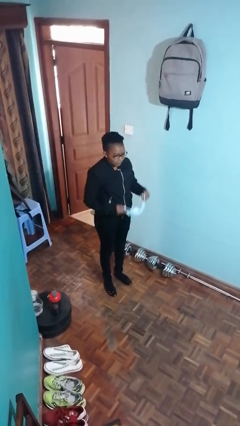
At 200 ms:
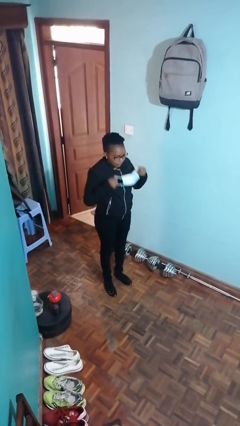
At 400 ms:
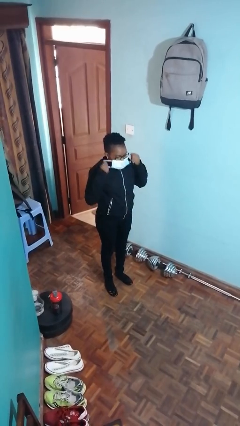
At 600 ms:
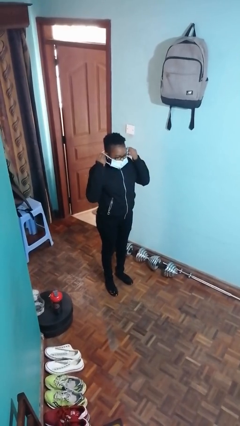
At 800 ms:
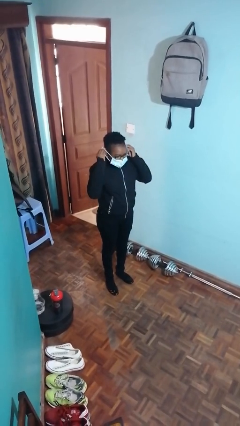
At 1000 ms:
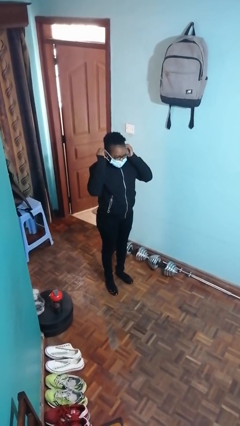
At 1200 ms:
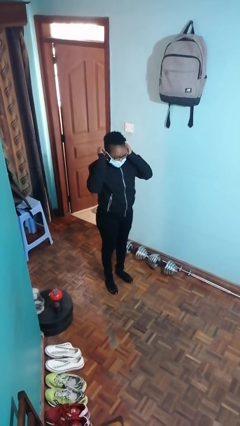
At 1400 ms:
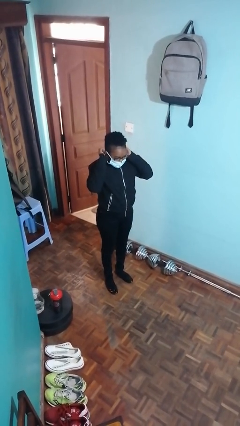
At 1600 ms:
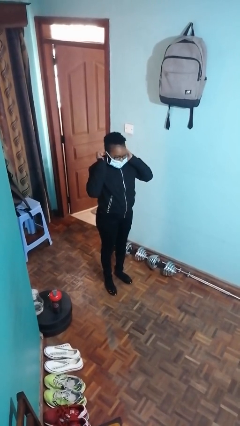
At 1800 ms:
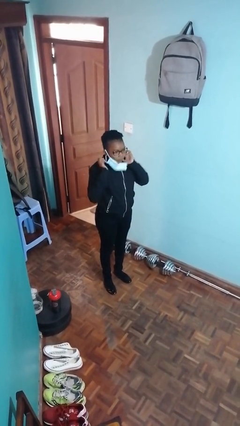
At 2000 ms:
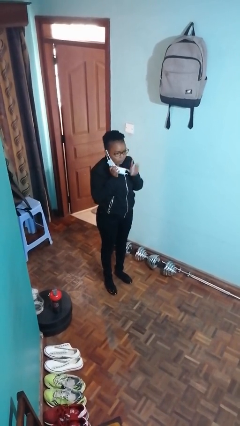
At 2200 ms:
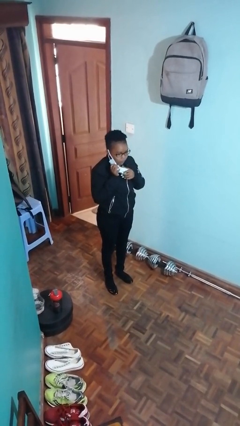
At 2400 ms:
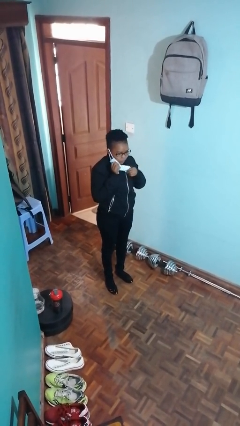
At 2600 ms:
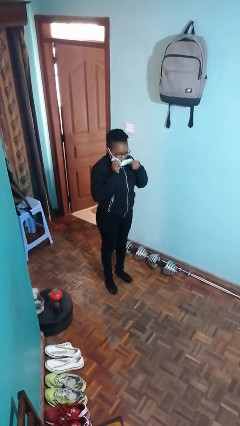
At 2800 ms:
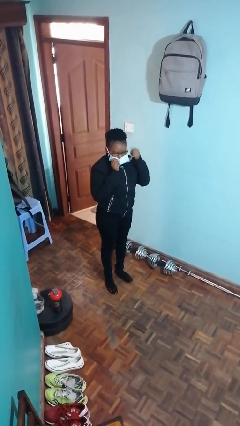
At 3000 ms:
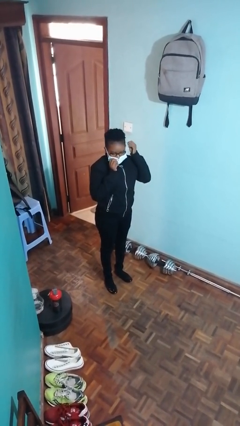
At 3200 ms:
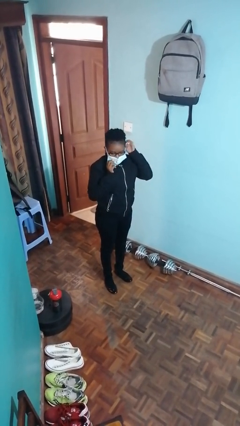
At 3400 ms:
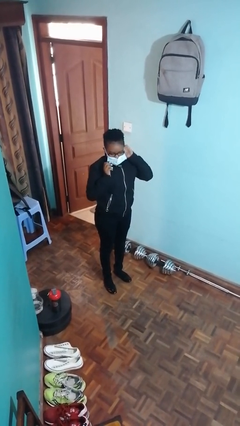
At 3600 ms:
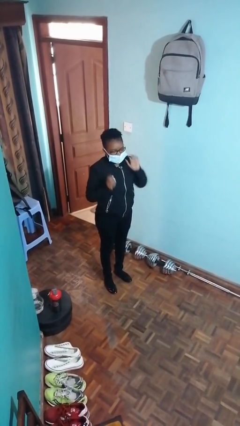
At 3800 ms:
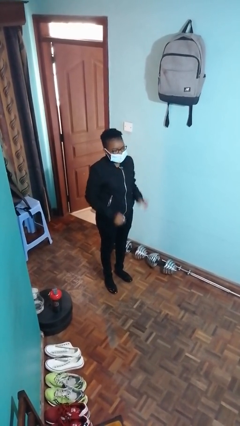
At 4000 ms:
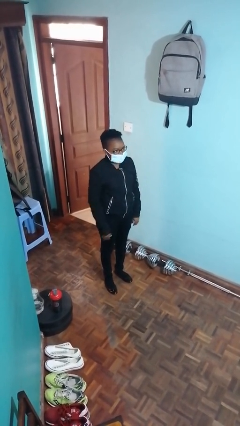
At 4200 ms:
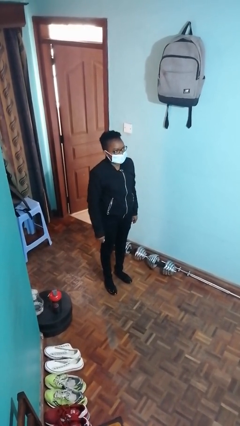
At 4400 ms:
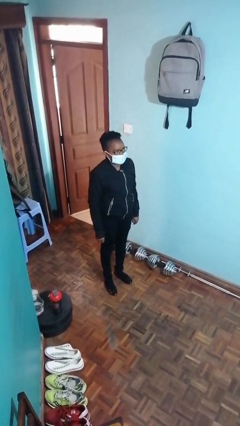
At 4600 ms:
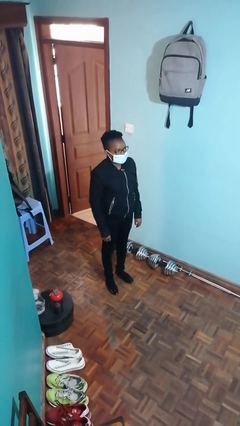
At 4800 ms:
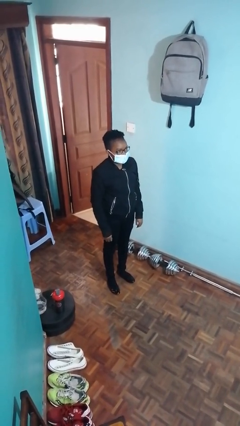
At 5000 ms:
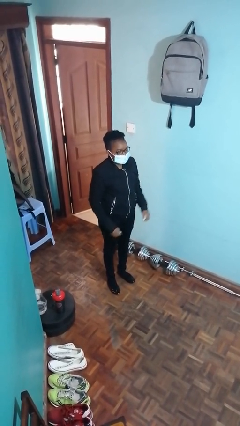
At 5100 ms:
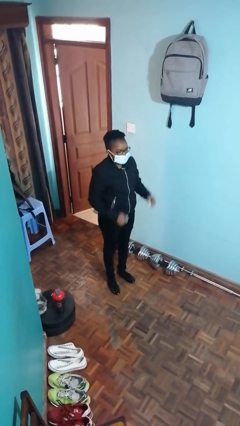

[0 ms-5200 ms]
person puts on facemask

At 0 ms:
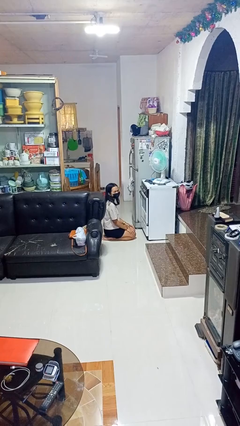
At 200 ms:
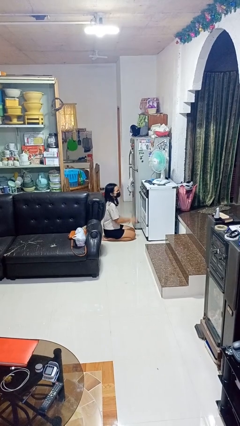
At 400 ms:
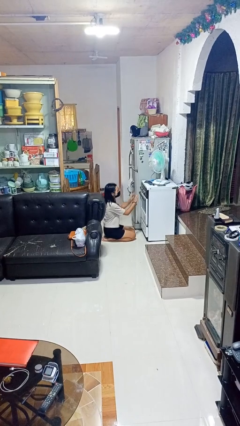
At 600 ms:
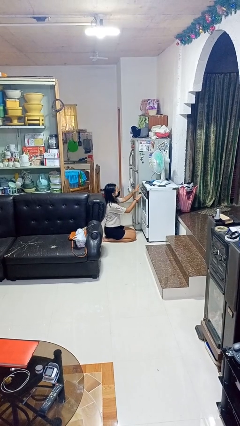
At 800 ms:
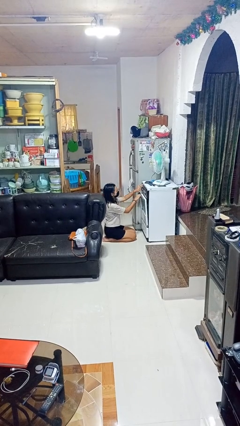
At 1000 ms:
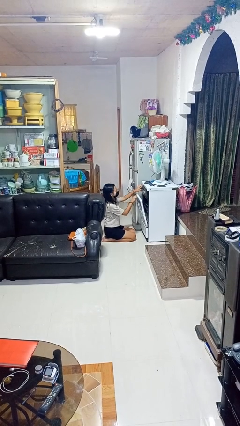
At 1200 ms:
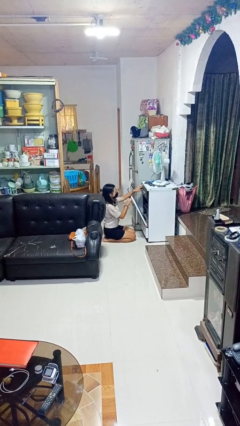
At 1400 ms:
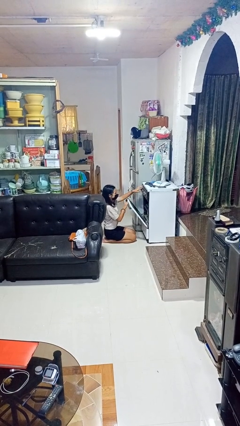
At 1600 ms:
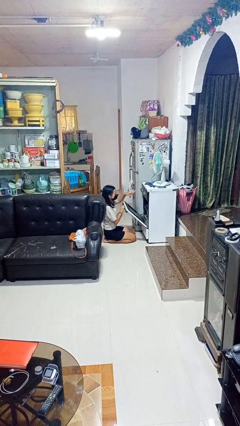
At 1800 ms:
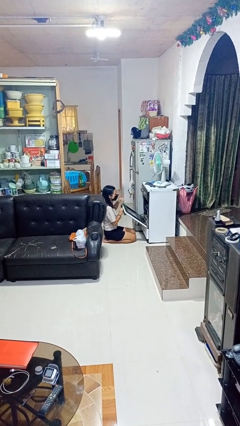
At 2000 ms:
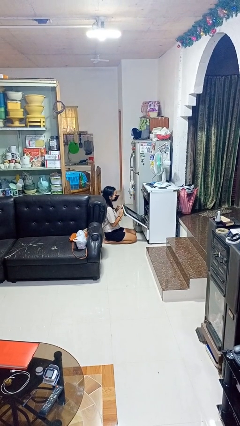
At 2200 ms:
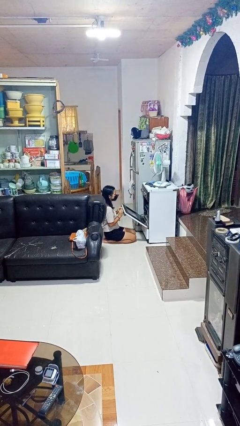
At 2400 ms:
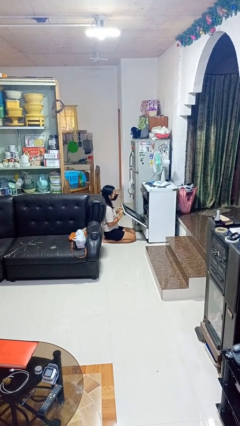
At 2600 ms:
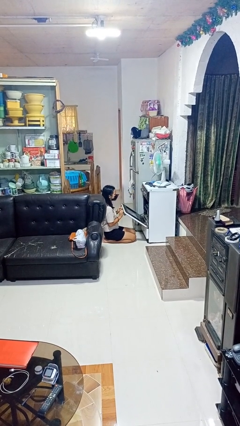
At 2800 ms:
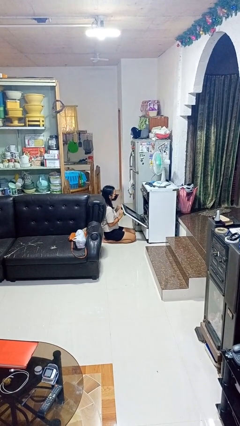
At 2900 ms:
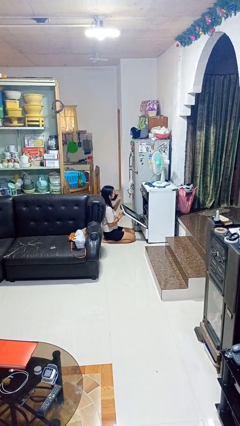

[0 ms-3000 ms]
person opens oven door

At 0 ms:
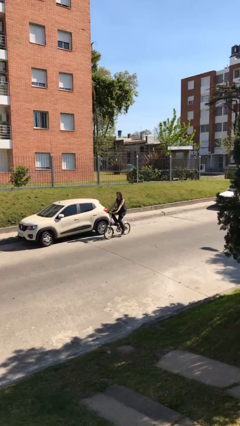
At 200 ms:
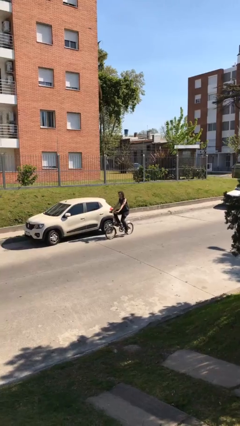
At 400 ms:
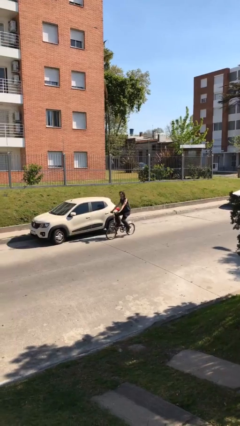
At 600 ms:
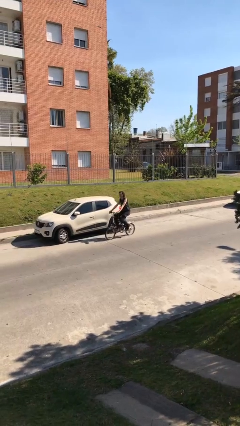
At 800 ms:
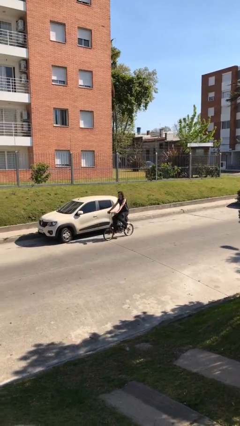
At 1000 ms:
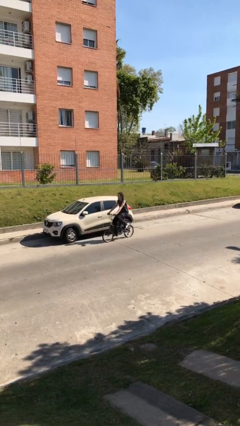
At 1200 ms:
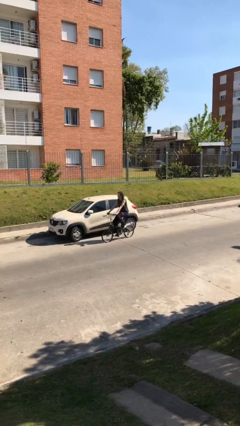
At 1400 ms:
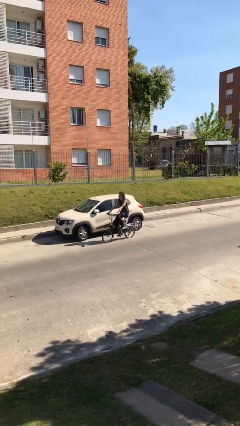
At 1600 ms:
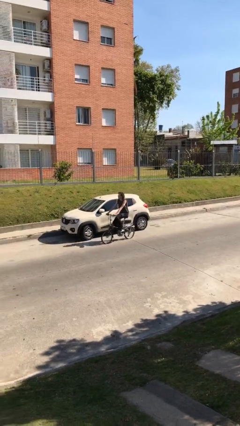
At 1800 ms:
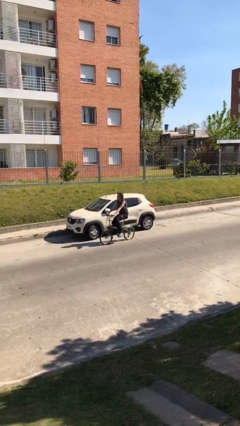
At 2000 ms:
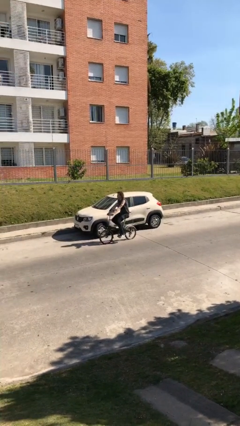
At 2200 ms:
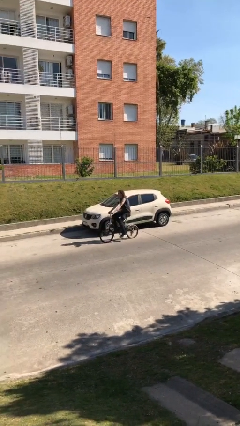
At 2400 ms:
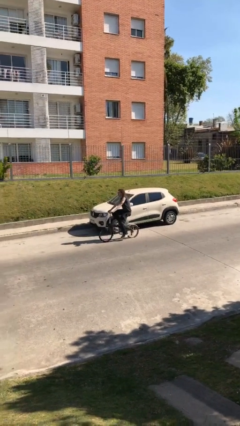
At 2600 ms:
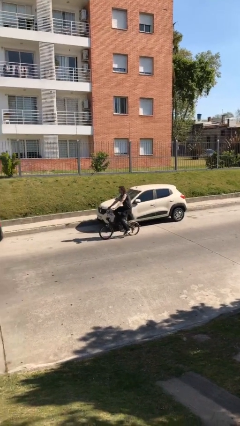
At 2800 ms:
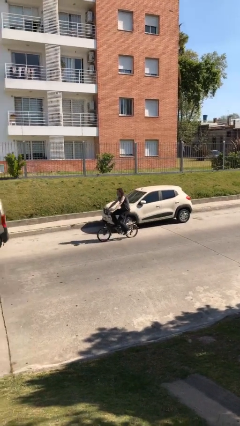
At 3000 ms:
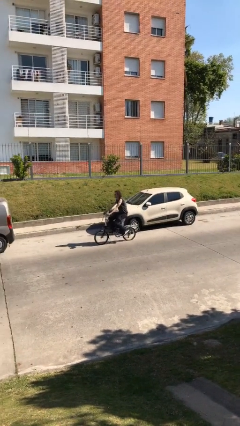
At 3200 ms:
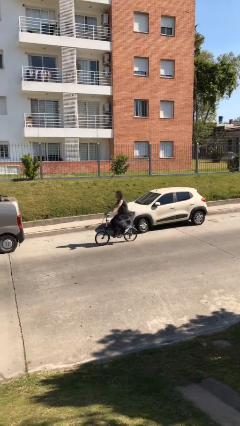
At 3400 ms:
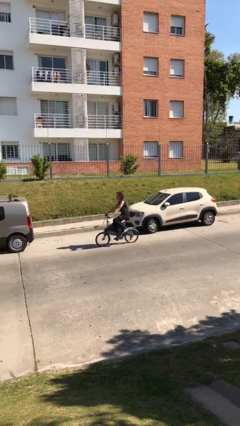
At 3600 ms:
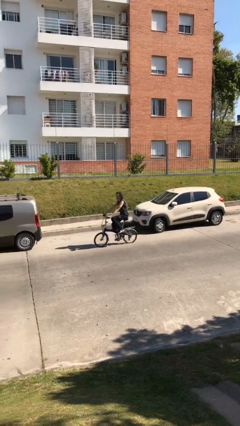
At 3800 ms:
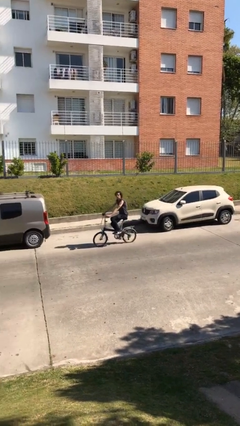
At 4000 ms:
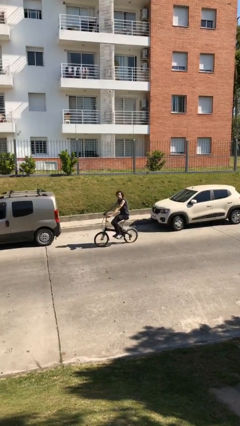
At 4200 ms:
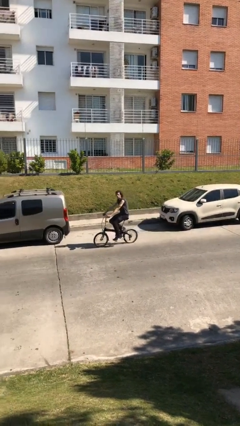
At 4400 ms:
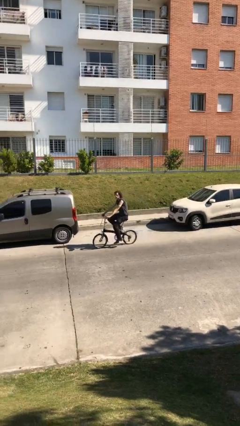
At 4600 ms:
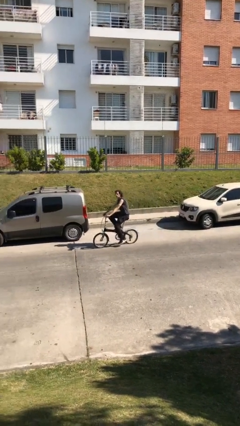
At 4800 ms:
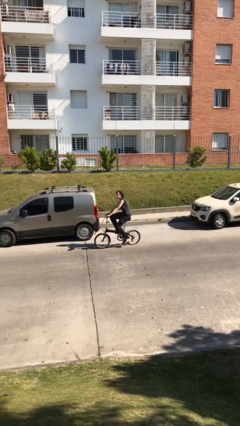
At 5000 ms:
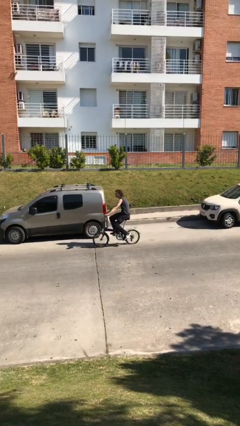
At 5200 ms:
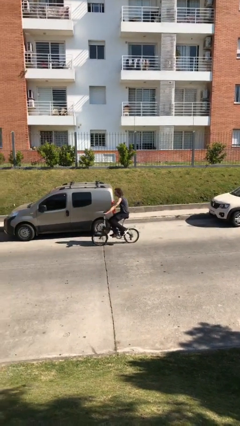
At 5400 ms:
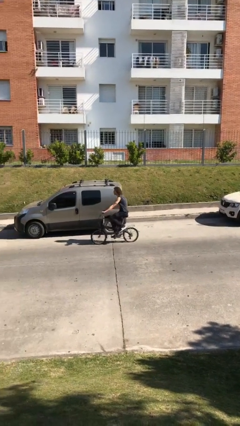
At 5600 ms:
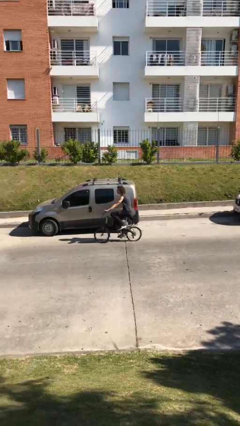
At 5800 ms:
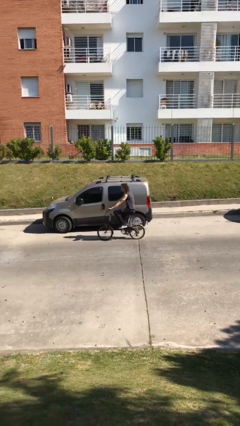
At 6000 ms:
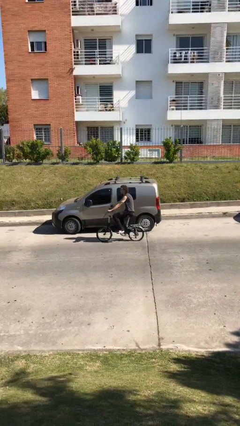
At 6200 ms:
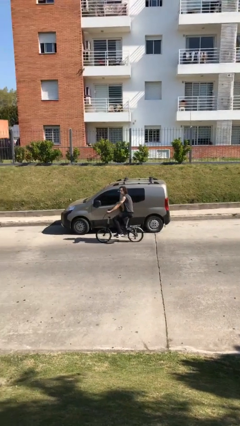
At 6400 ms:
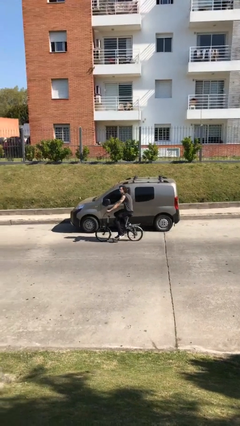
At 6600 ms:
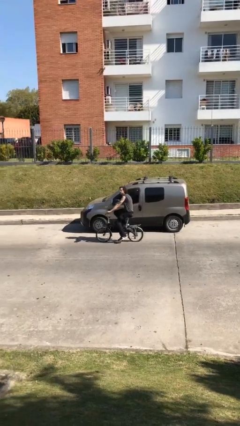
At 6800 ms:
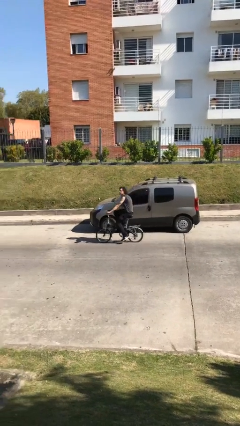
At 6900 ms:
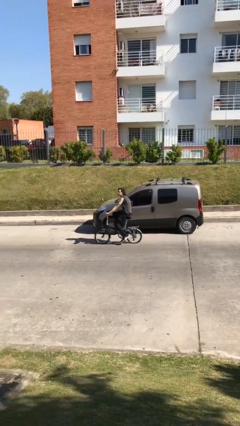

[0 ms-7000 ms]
person rides bicycle

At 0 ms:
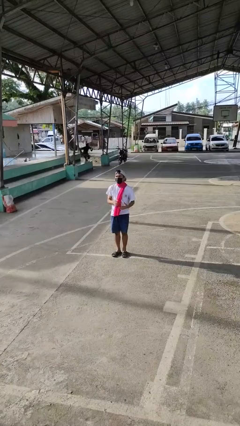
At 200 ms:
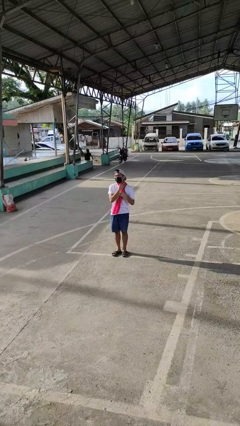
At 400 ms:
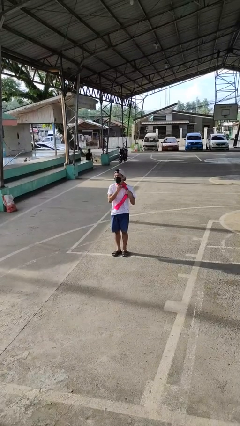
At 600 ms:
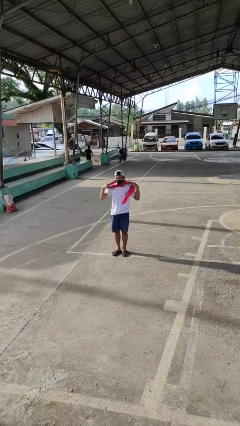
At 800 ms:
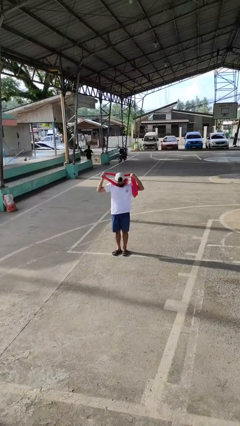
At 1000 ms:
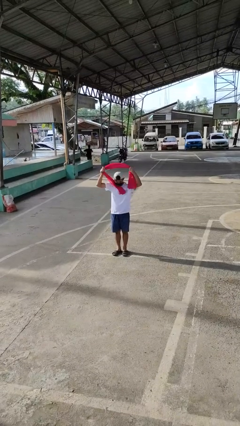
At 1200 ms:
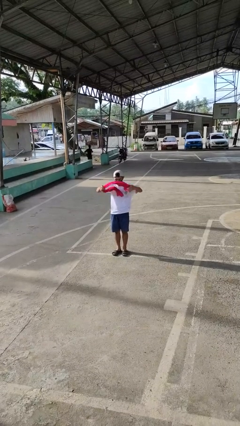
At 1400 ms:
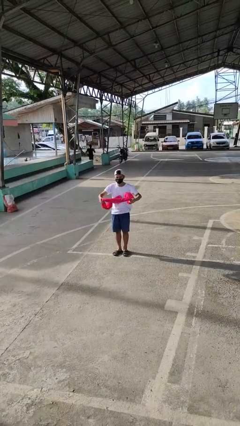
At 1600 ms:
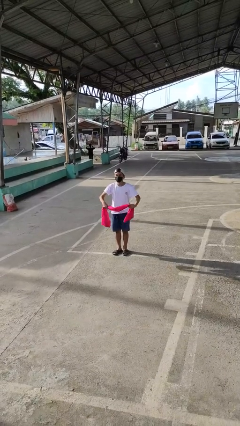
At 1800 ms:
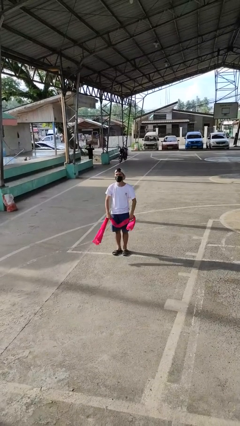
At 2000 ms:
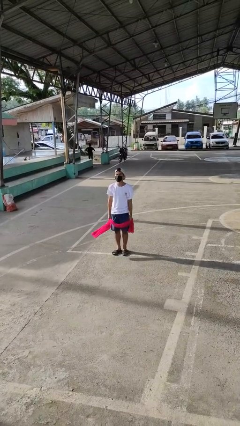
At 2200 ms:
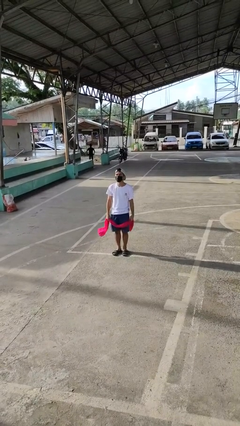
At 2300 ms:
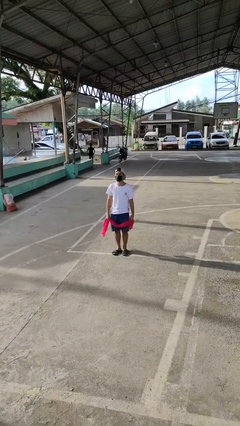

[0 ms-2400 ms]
person takes off scarf

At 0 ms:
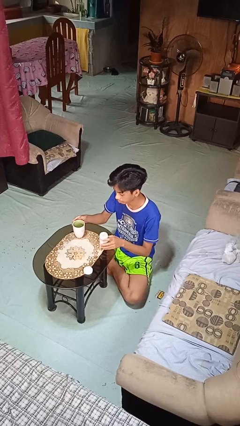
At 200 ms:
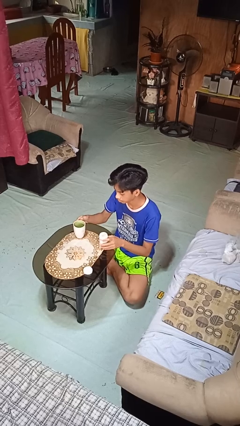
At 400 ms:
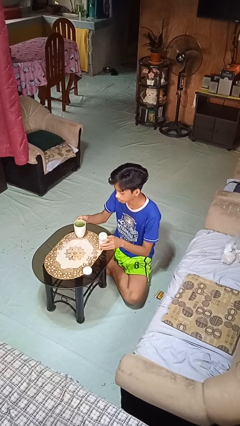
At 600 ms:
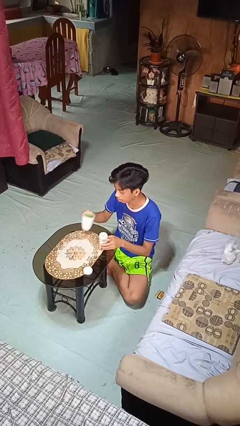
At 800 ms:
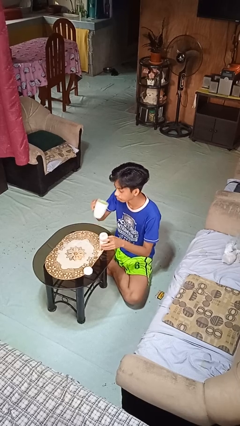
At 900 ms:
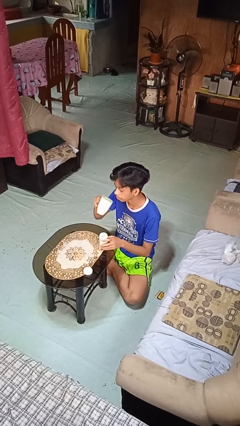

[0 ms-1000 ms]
person drinks from cup
